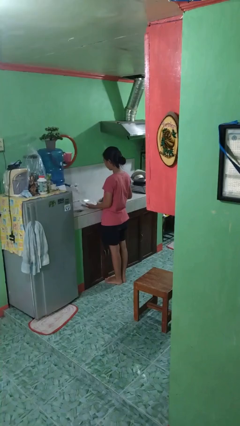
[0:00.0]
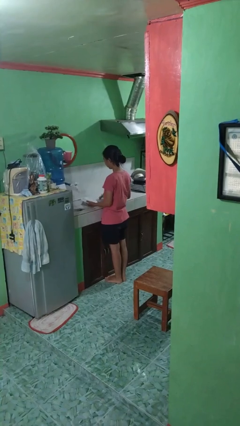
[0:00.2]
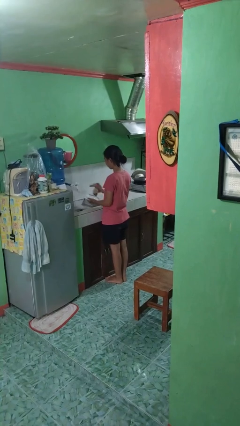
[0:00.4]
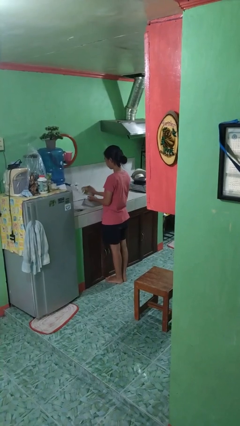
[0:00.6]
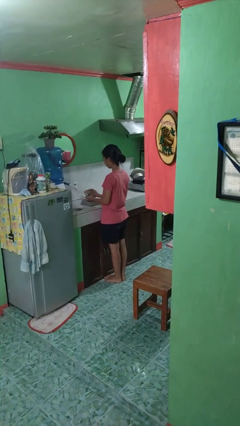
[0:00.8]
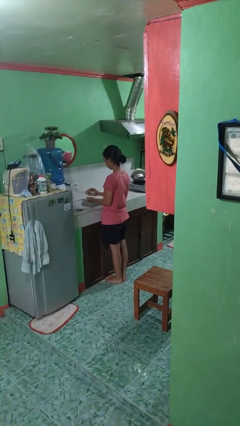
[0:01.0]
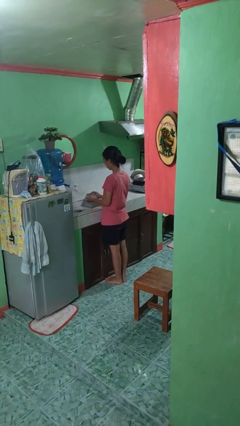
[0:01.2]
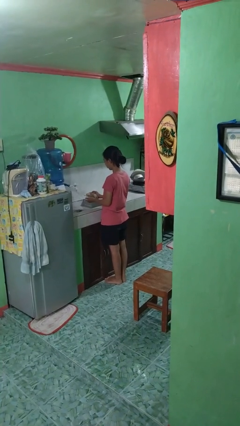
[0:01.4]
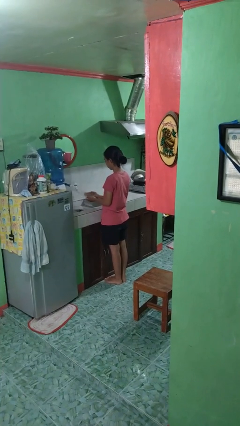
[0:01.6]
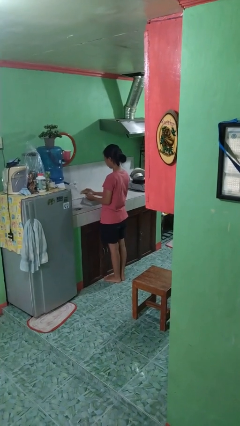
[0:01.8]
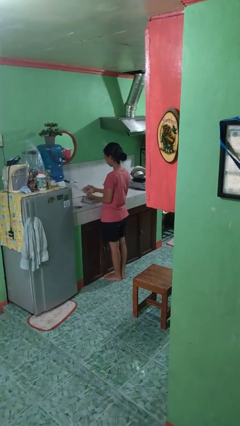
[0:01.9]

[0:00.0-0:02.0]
person dries dish

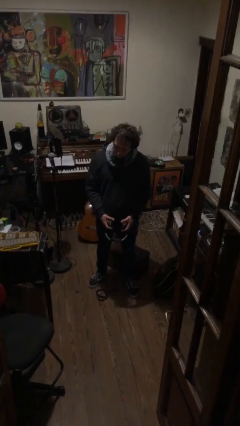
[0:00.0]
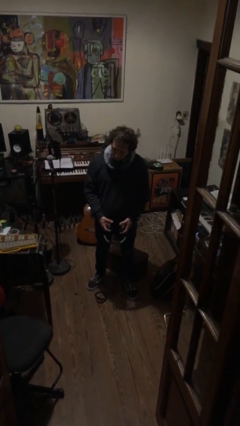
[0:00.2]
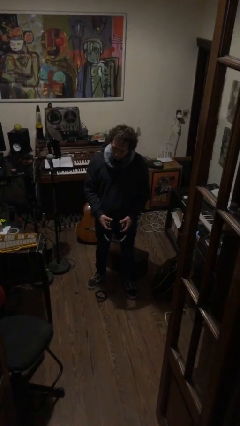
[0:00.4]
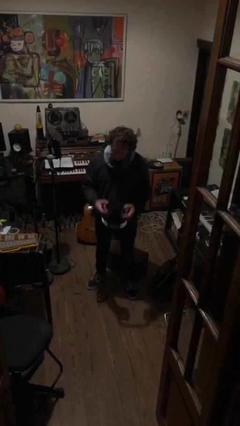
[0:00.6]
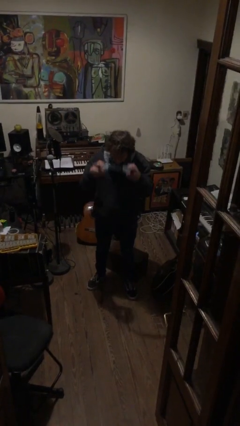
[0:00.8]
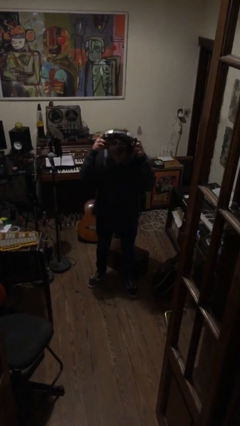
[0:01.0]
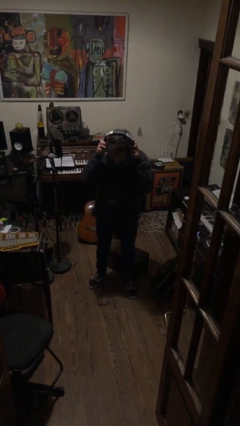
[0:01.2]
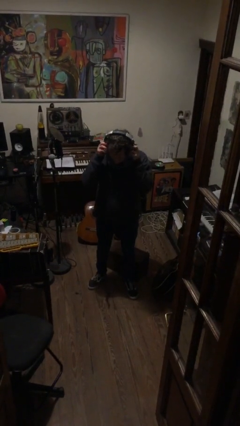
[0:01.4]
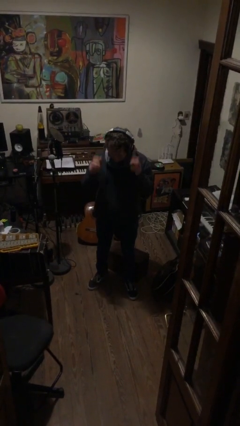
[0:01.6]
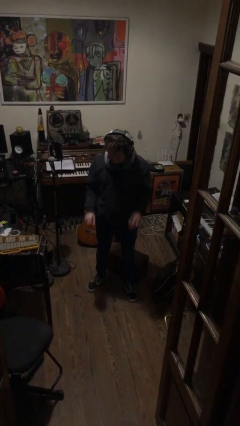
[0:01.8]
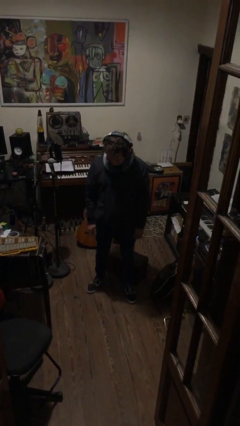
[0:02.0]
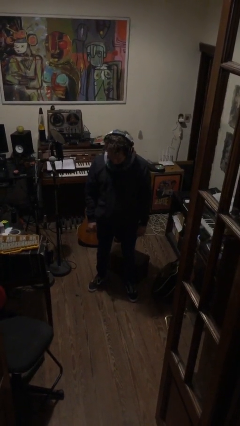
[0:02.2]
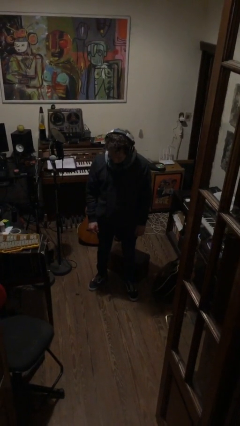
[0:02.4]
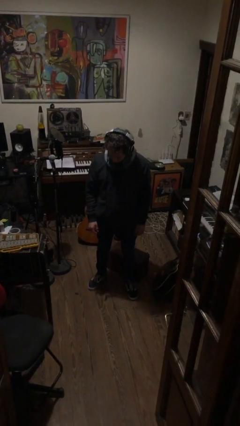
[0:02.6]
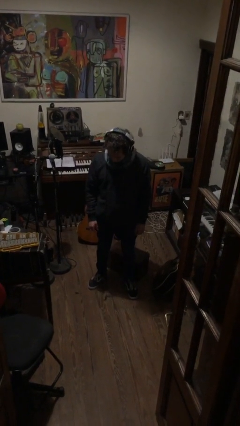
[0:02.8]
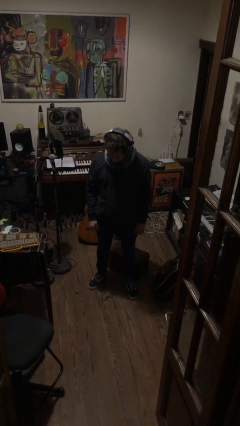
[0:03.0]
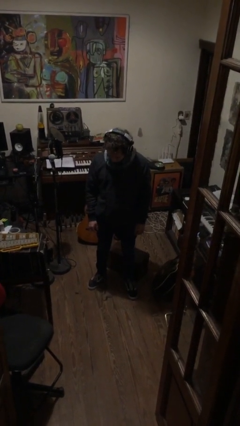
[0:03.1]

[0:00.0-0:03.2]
person puts on headphones

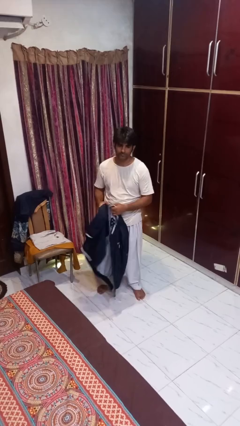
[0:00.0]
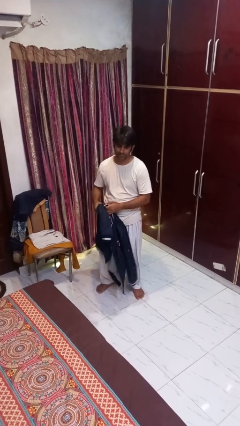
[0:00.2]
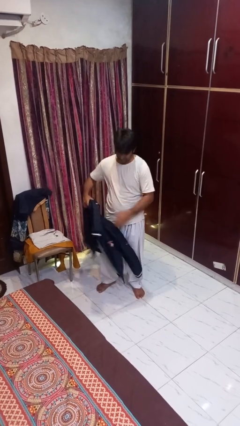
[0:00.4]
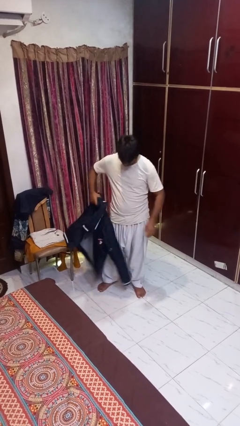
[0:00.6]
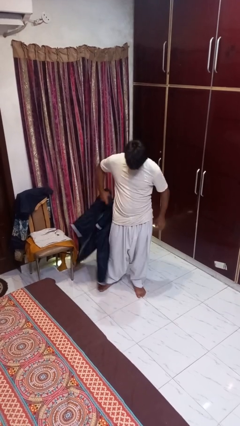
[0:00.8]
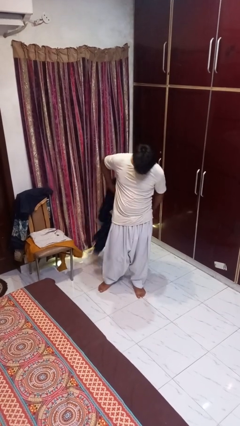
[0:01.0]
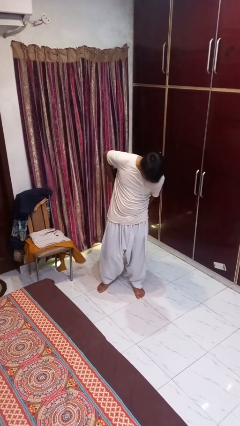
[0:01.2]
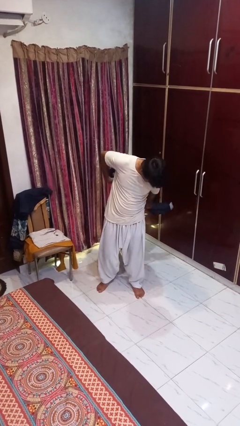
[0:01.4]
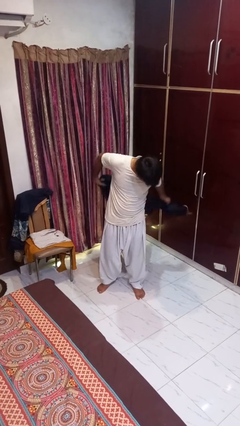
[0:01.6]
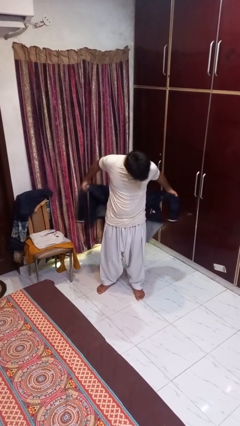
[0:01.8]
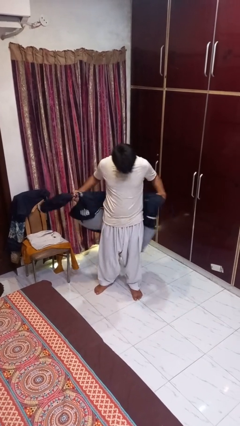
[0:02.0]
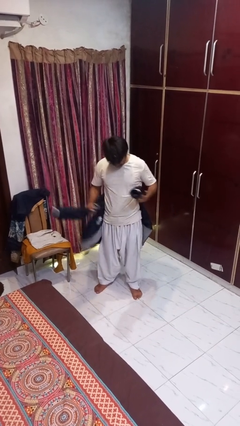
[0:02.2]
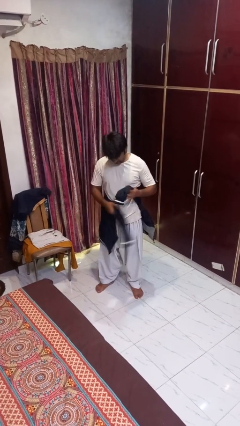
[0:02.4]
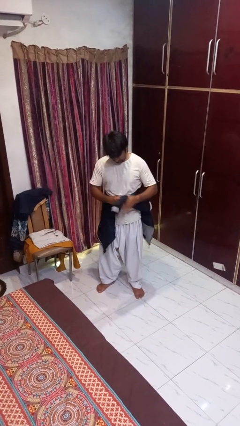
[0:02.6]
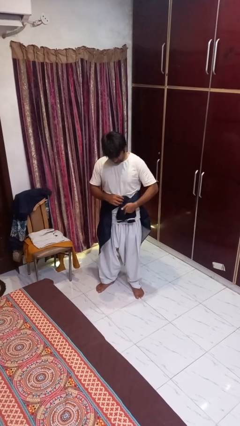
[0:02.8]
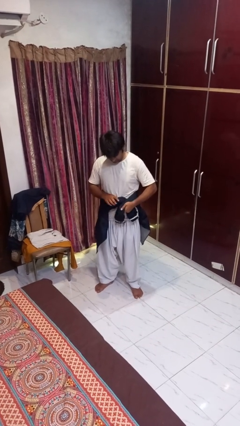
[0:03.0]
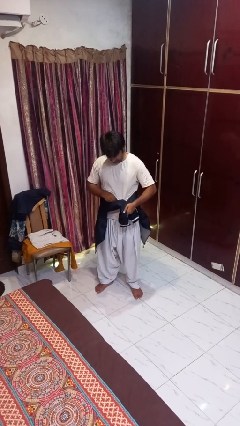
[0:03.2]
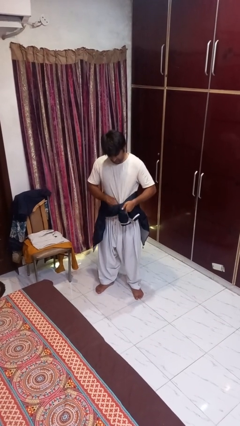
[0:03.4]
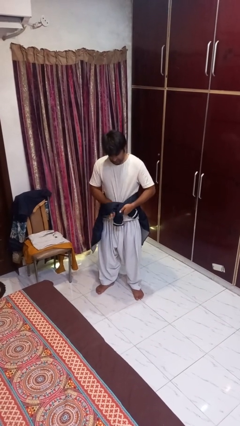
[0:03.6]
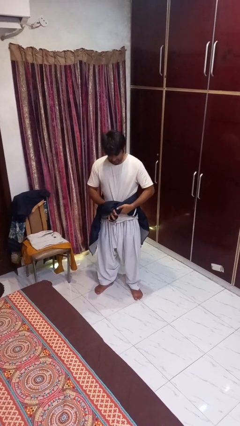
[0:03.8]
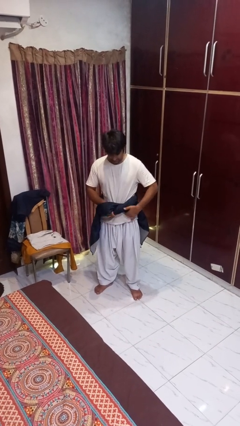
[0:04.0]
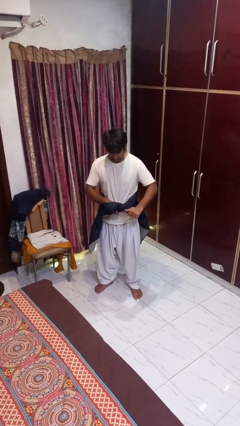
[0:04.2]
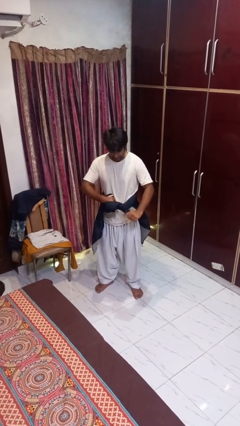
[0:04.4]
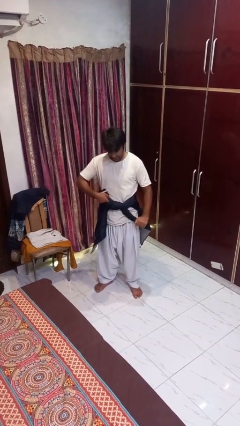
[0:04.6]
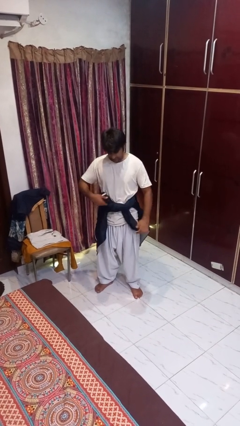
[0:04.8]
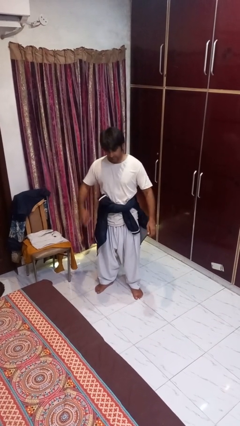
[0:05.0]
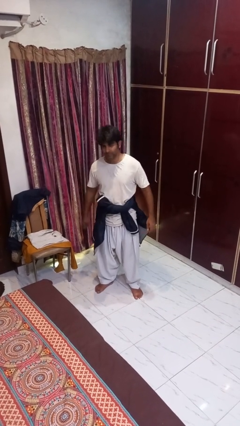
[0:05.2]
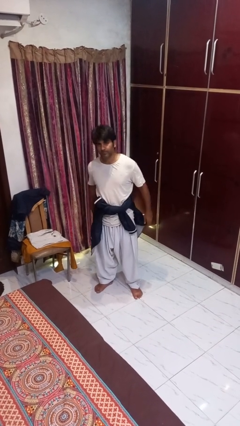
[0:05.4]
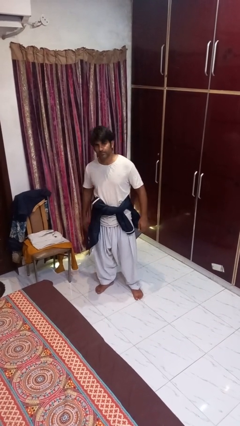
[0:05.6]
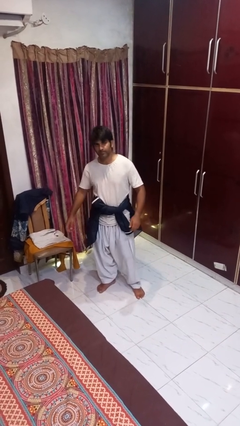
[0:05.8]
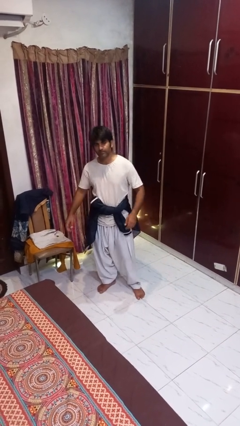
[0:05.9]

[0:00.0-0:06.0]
person ties jacket around waist

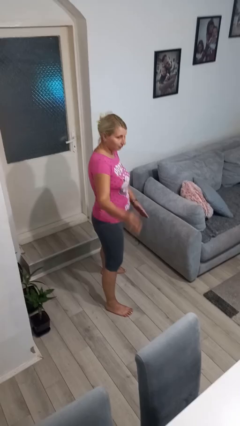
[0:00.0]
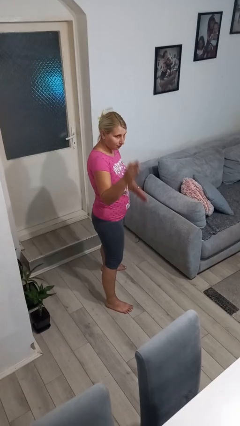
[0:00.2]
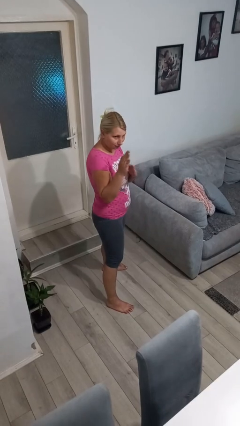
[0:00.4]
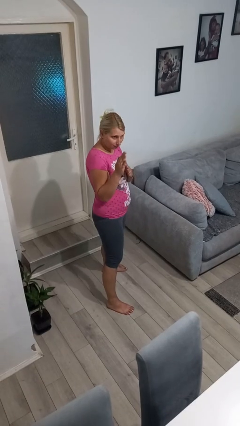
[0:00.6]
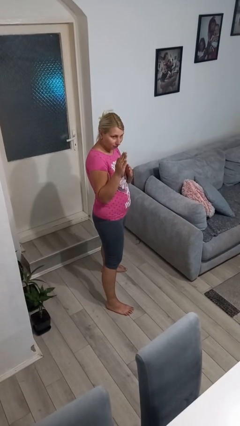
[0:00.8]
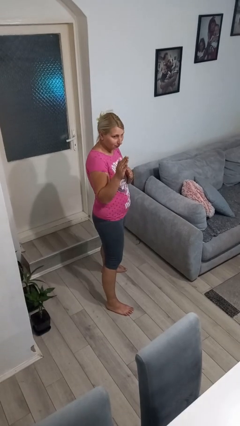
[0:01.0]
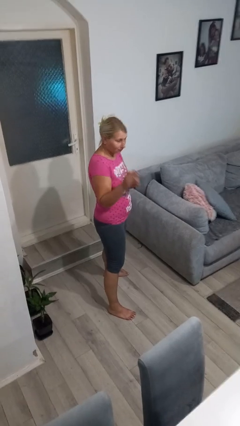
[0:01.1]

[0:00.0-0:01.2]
person karate chop

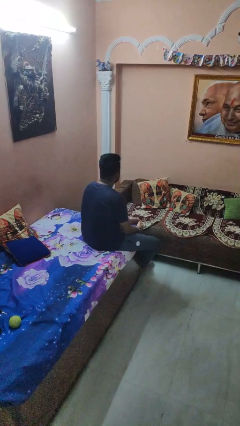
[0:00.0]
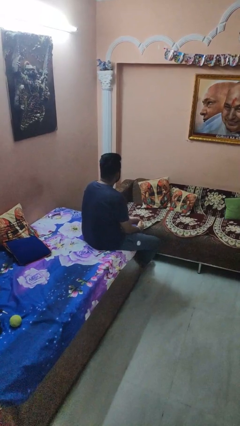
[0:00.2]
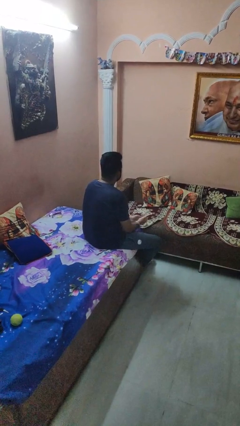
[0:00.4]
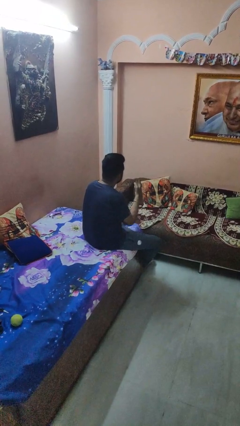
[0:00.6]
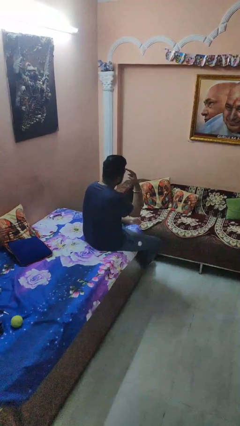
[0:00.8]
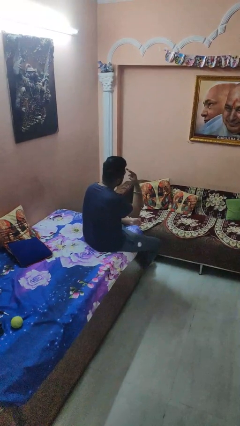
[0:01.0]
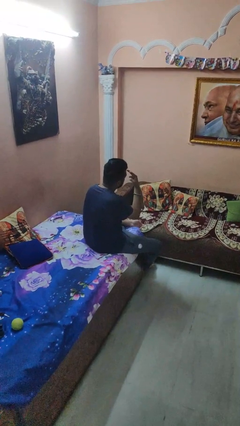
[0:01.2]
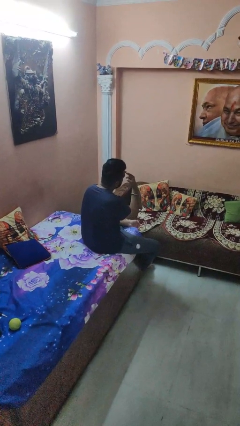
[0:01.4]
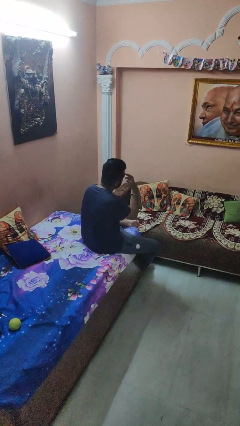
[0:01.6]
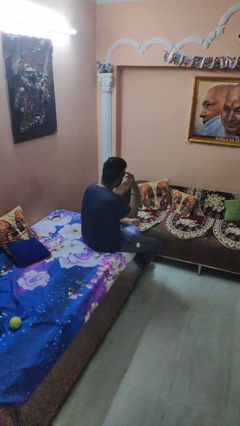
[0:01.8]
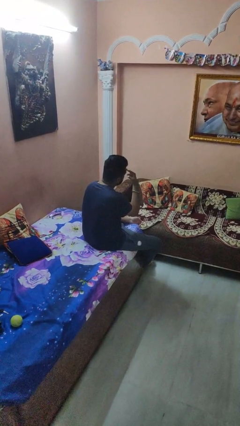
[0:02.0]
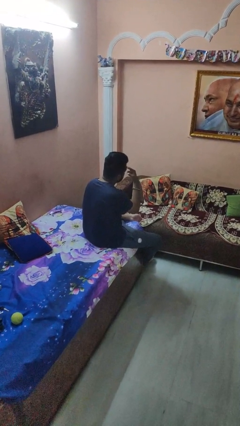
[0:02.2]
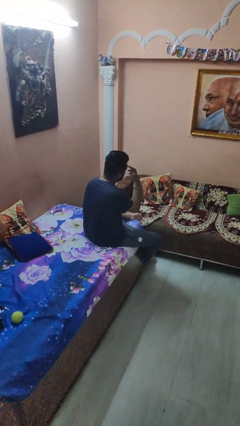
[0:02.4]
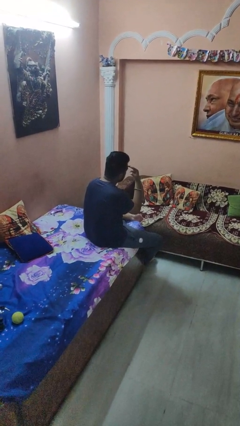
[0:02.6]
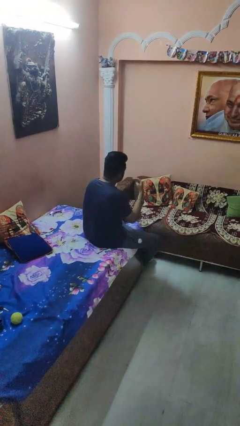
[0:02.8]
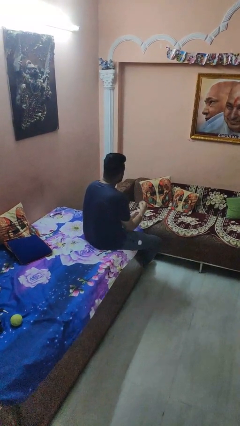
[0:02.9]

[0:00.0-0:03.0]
person gestures watch closely

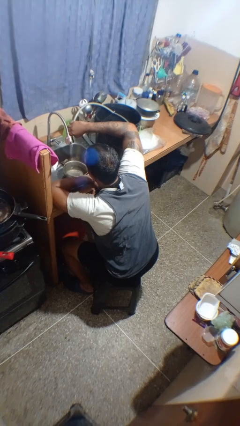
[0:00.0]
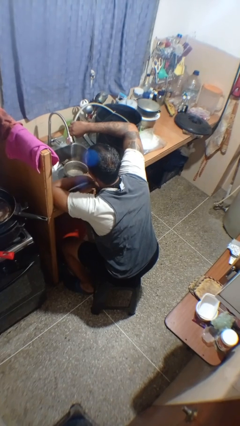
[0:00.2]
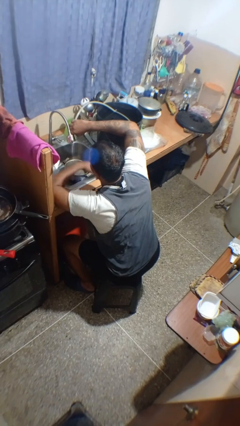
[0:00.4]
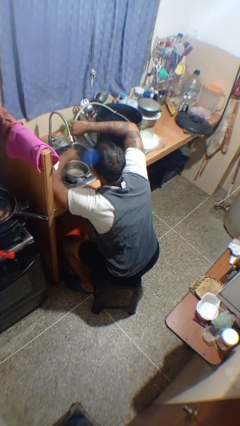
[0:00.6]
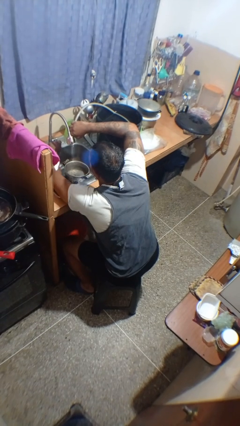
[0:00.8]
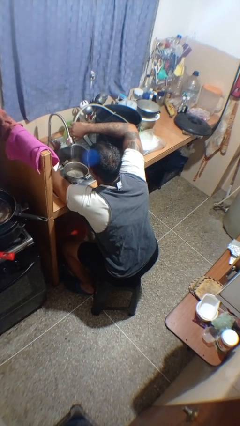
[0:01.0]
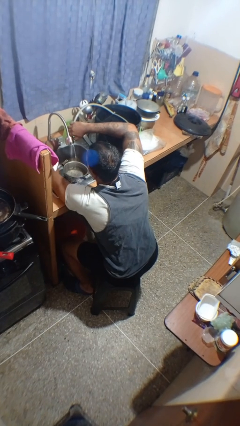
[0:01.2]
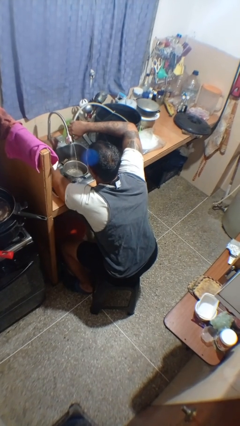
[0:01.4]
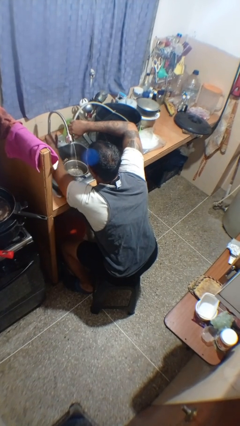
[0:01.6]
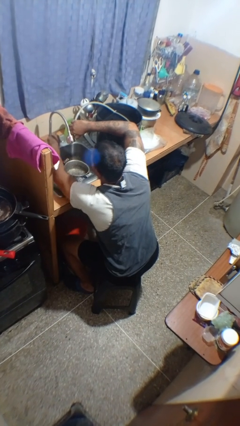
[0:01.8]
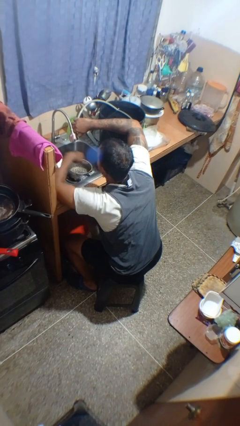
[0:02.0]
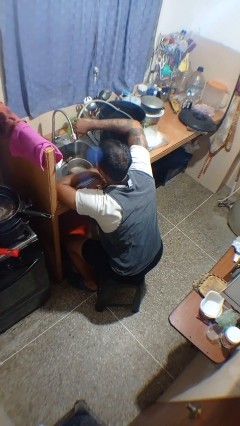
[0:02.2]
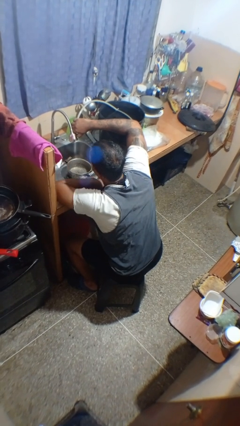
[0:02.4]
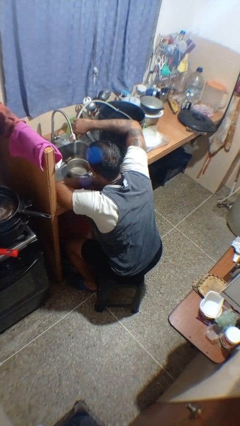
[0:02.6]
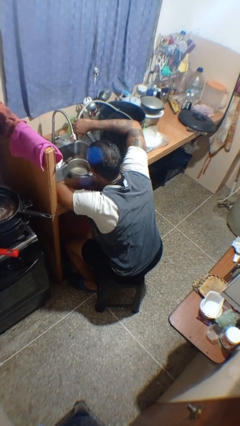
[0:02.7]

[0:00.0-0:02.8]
person turns off faucet
